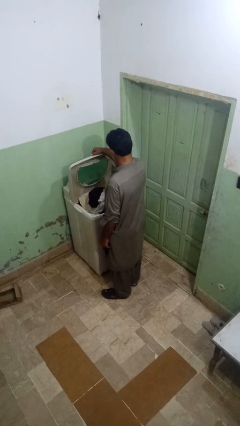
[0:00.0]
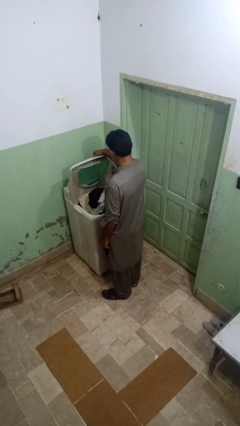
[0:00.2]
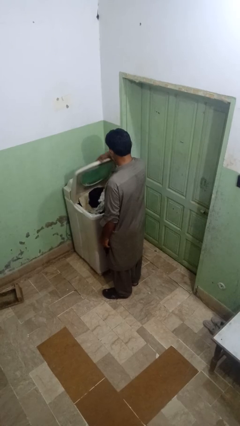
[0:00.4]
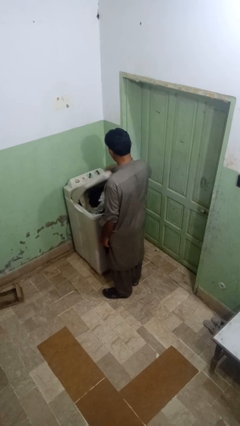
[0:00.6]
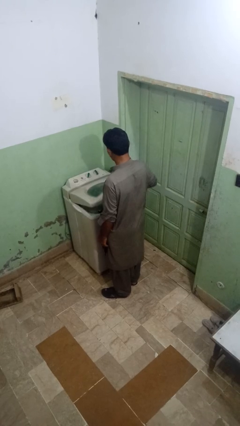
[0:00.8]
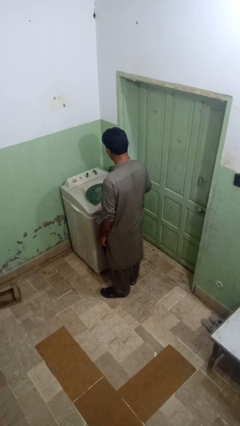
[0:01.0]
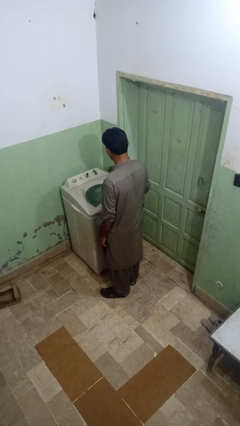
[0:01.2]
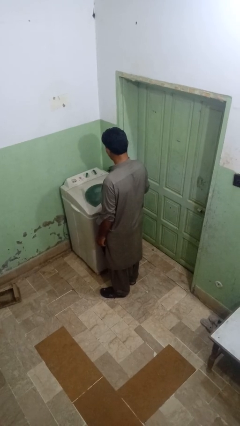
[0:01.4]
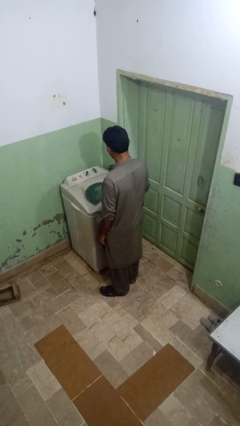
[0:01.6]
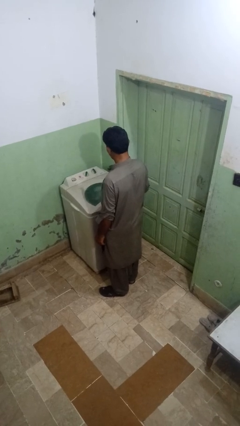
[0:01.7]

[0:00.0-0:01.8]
person closes clothes washer

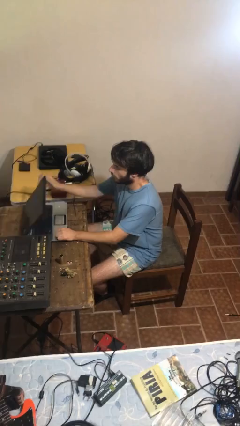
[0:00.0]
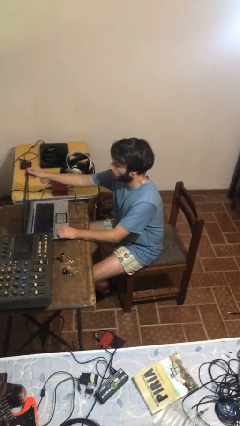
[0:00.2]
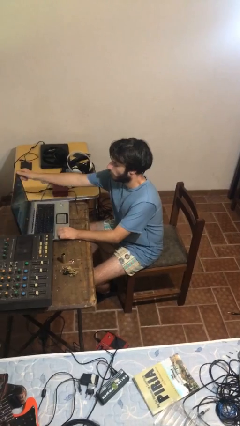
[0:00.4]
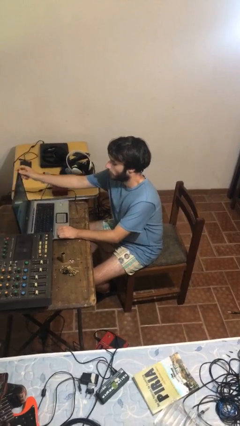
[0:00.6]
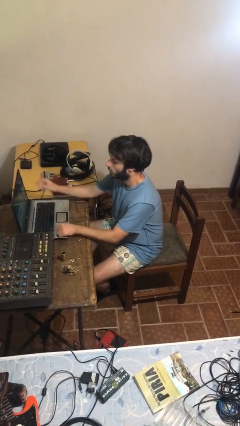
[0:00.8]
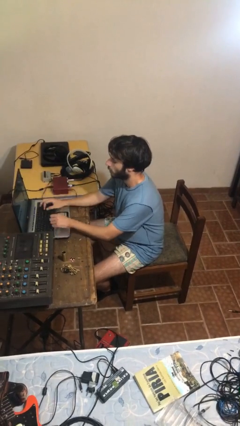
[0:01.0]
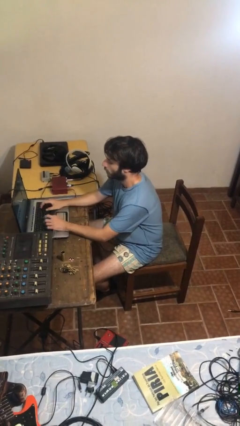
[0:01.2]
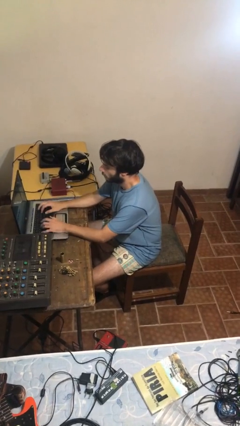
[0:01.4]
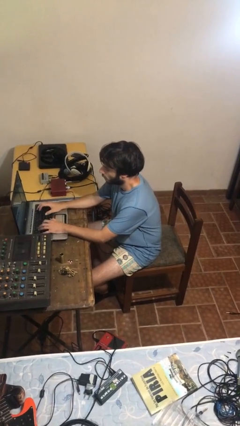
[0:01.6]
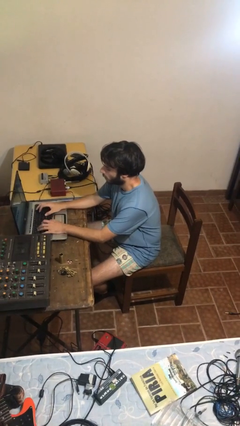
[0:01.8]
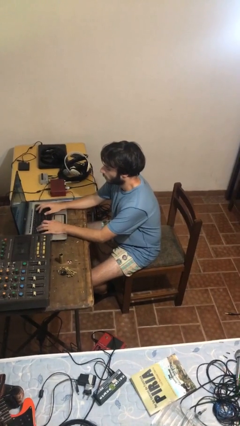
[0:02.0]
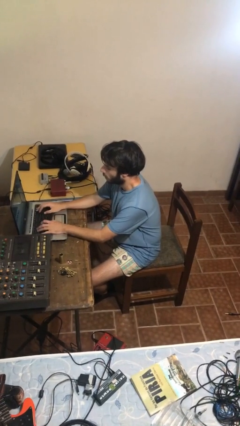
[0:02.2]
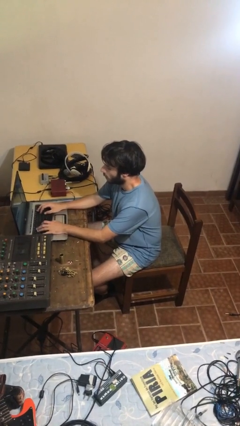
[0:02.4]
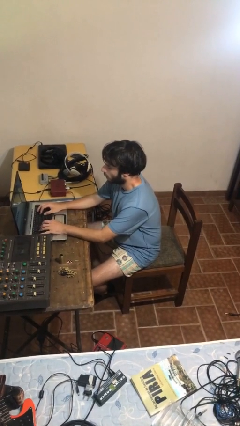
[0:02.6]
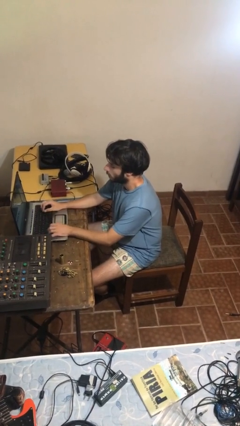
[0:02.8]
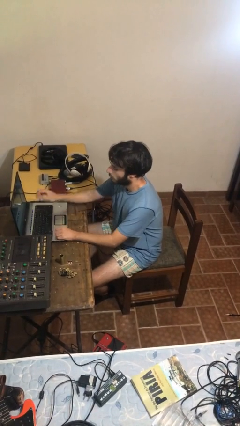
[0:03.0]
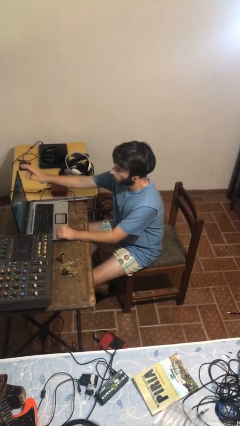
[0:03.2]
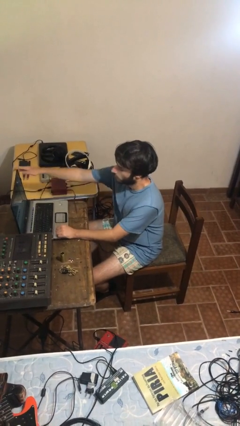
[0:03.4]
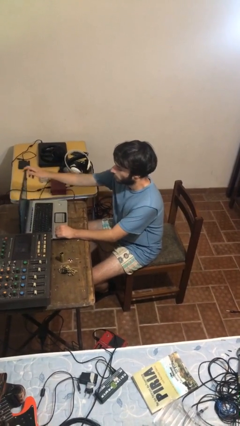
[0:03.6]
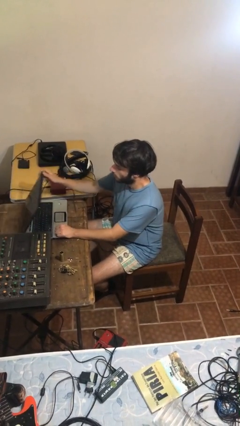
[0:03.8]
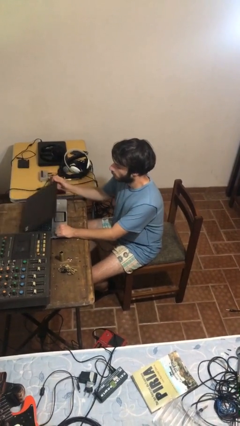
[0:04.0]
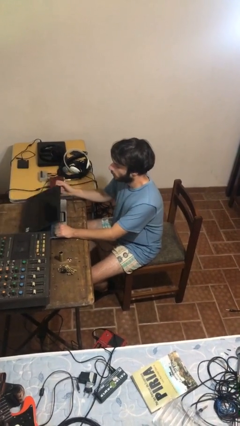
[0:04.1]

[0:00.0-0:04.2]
person interacts with laptop

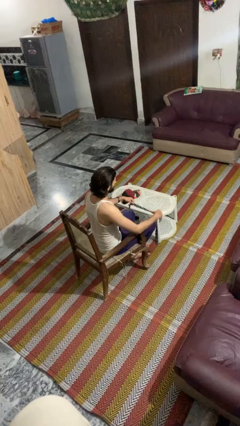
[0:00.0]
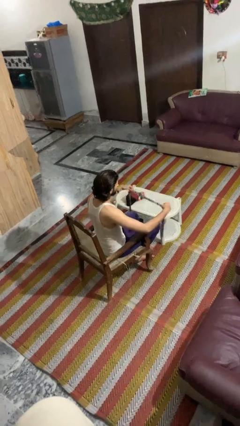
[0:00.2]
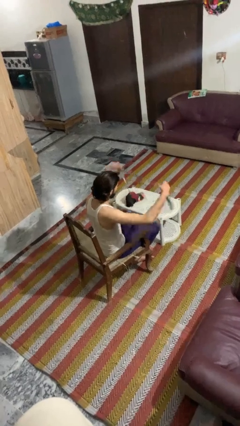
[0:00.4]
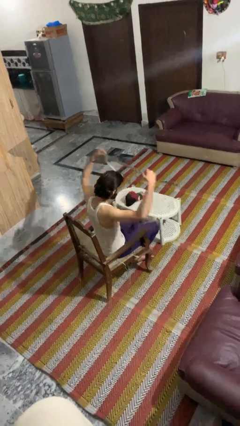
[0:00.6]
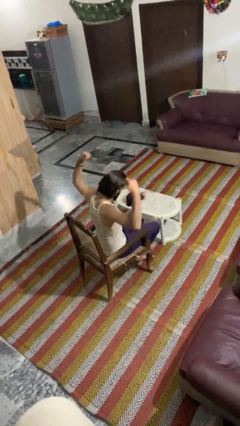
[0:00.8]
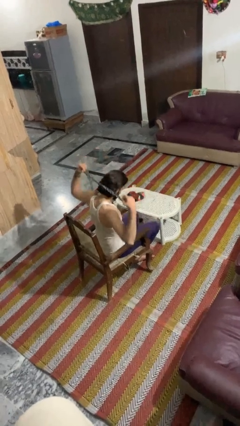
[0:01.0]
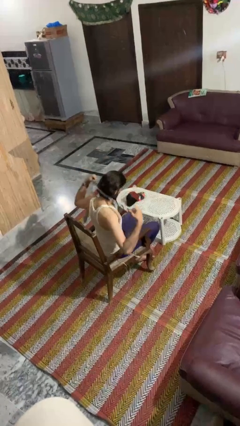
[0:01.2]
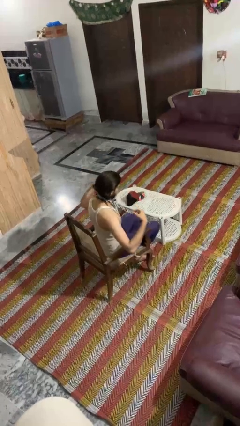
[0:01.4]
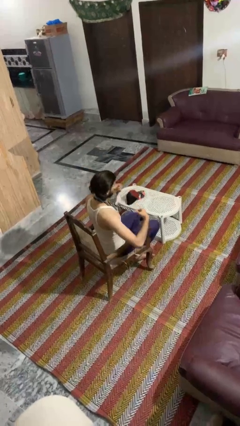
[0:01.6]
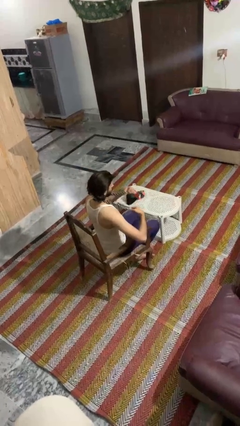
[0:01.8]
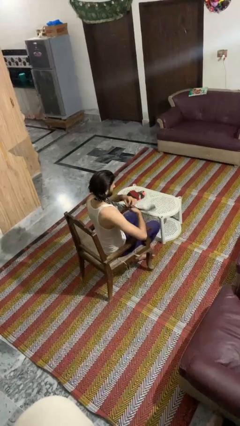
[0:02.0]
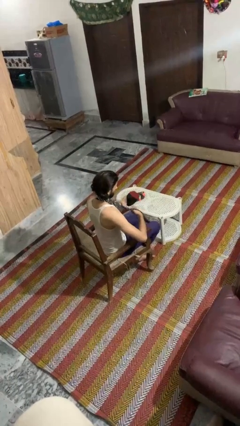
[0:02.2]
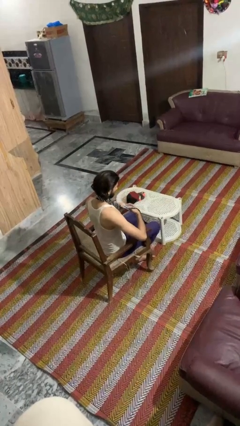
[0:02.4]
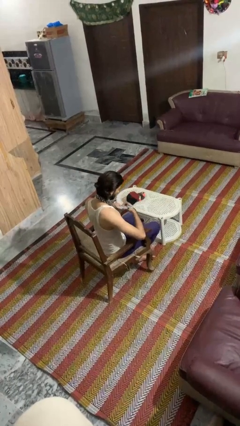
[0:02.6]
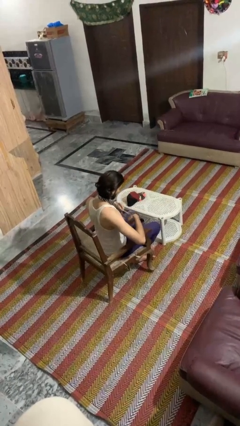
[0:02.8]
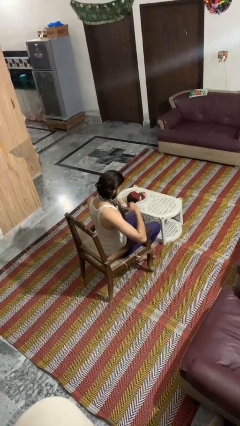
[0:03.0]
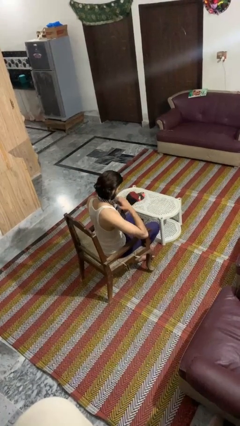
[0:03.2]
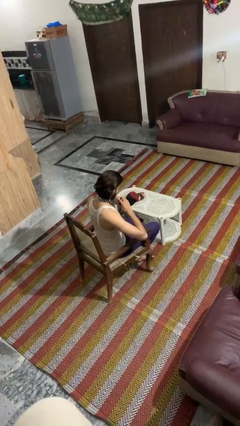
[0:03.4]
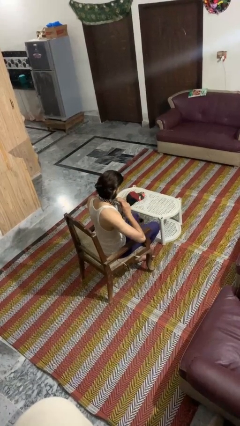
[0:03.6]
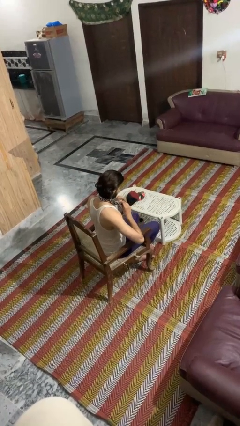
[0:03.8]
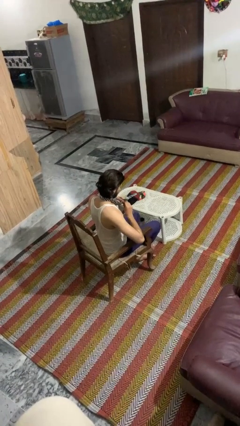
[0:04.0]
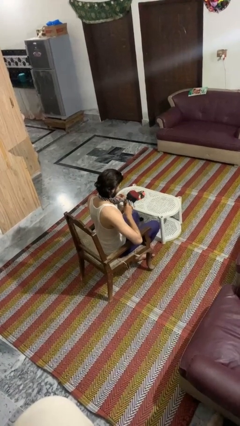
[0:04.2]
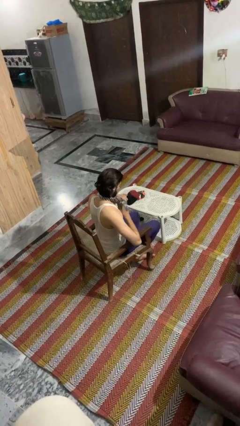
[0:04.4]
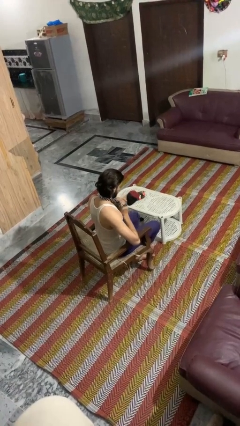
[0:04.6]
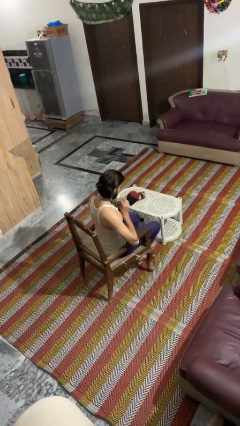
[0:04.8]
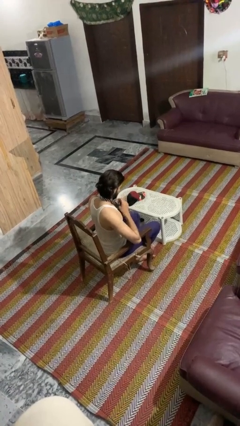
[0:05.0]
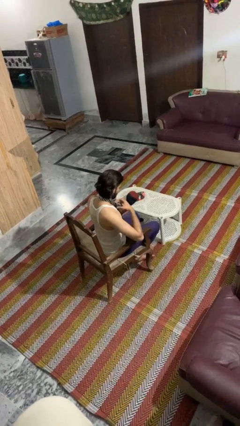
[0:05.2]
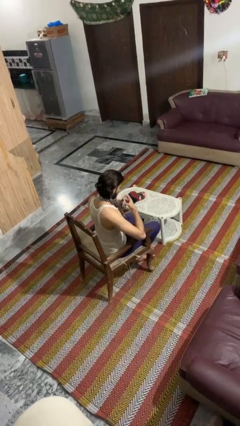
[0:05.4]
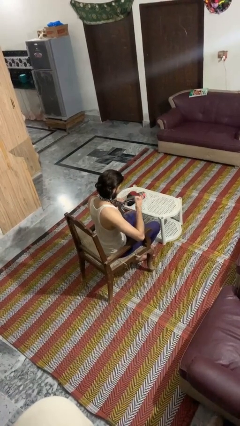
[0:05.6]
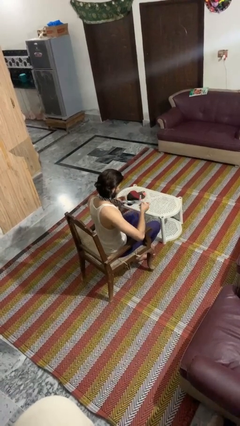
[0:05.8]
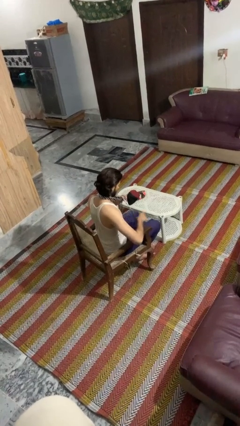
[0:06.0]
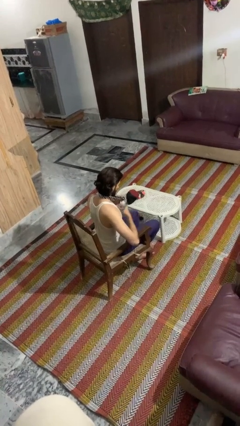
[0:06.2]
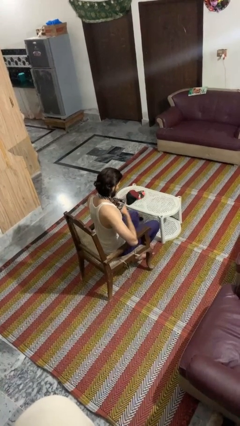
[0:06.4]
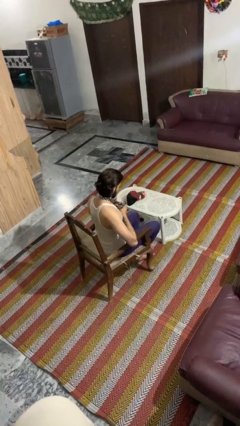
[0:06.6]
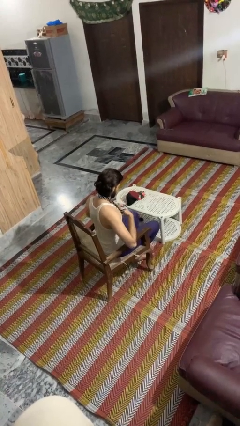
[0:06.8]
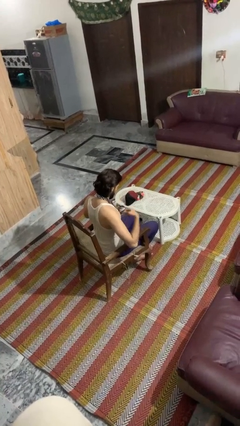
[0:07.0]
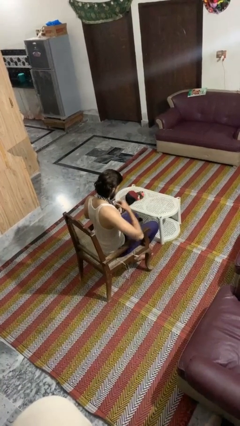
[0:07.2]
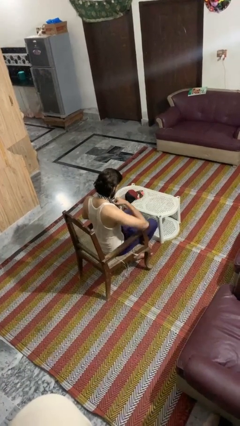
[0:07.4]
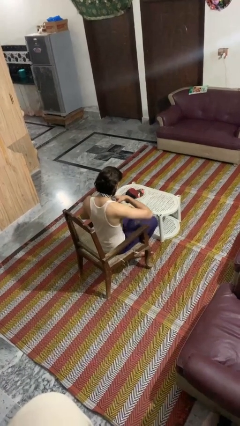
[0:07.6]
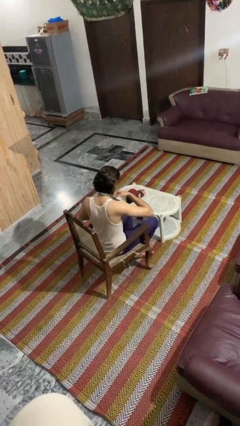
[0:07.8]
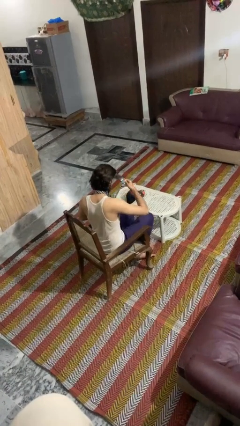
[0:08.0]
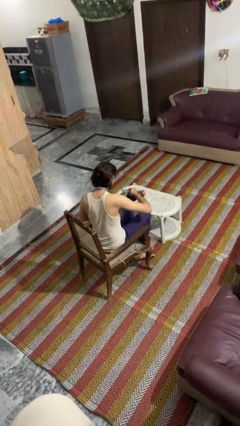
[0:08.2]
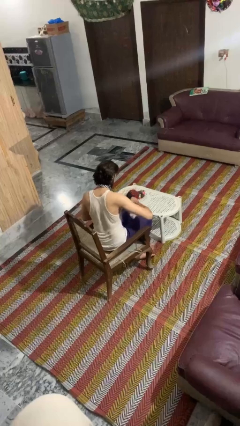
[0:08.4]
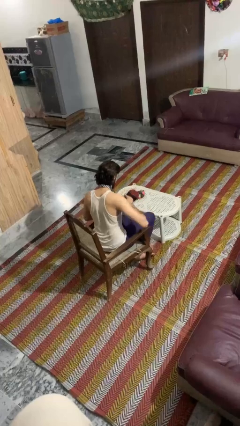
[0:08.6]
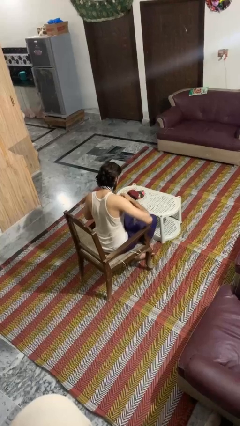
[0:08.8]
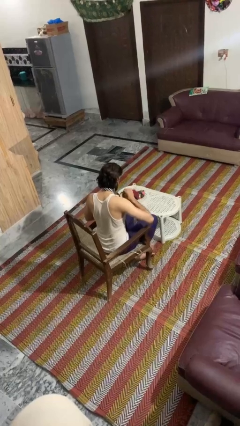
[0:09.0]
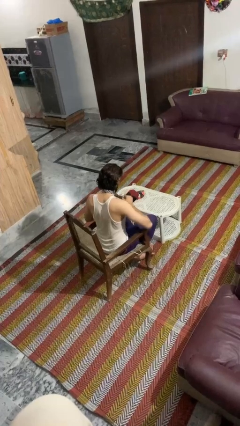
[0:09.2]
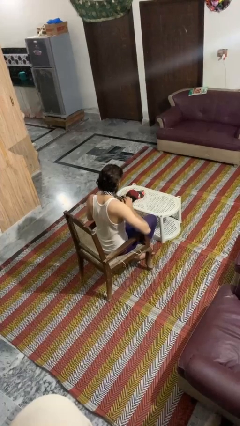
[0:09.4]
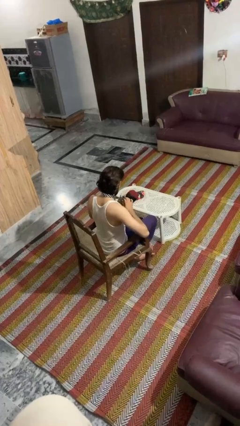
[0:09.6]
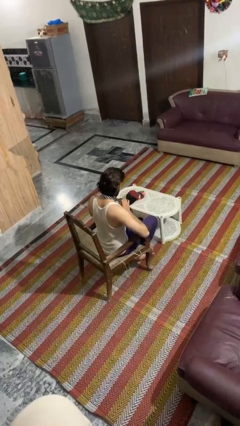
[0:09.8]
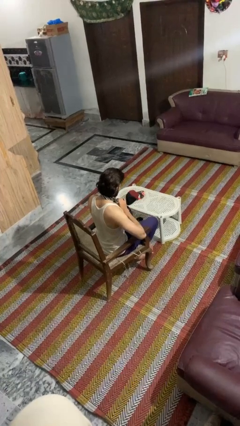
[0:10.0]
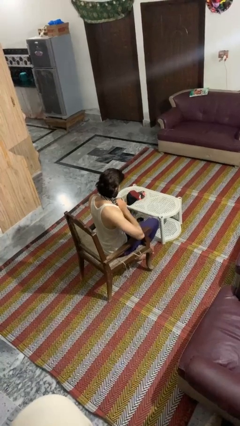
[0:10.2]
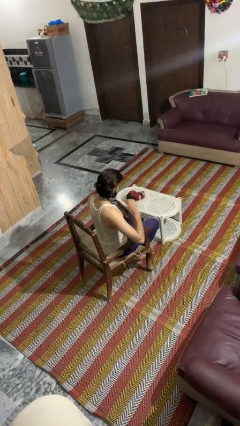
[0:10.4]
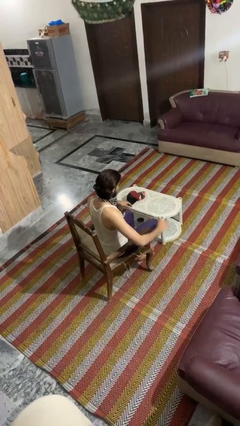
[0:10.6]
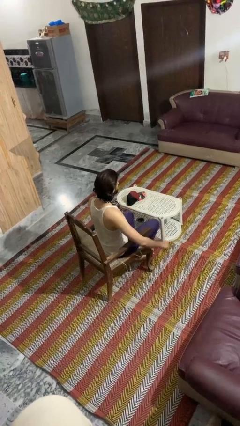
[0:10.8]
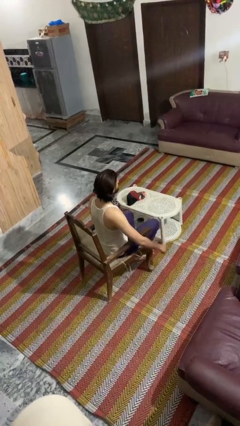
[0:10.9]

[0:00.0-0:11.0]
person puts on necktie

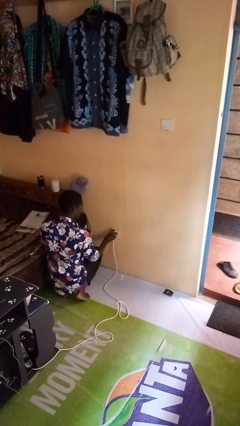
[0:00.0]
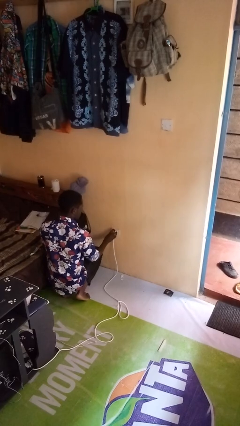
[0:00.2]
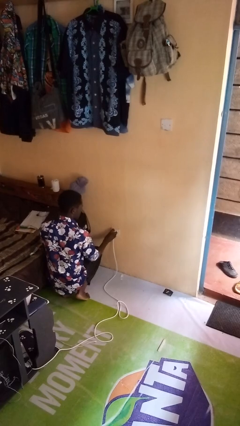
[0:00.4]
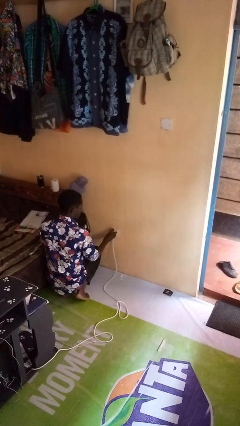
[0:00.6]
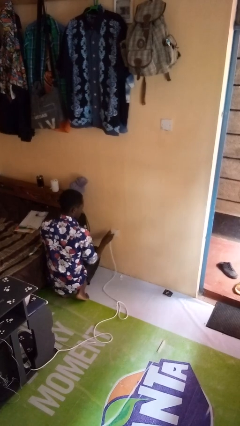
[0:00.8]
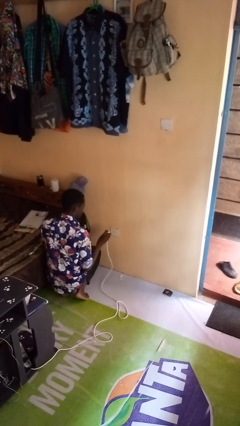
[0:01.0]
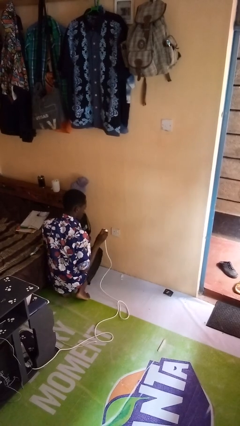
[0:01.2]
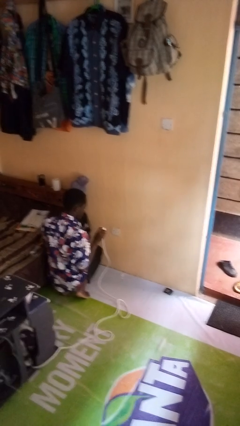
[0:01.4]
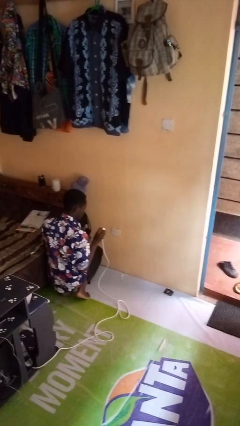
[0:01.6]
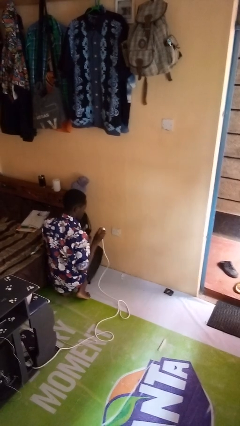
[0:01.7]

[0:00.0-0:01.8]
person unplugs from electrical socket
